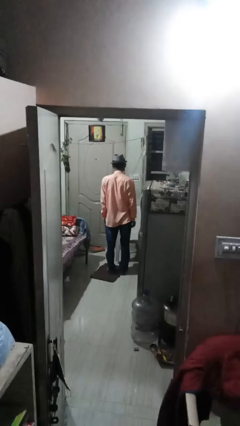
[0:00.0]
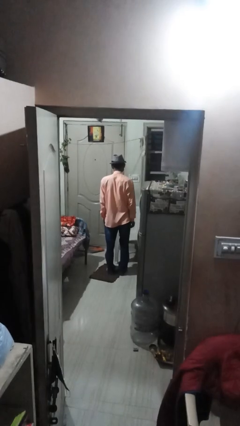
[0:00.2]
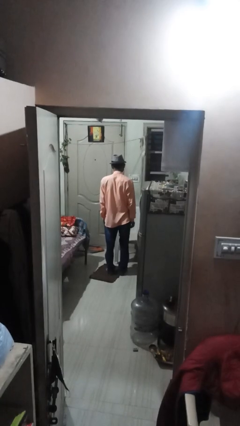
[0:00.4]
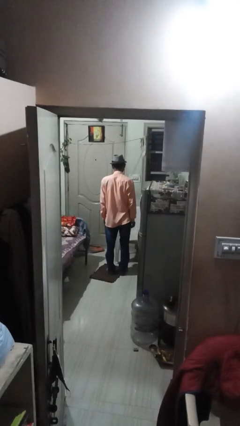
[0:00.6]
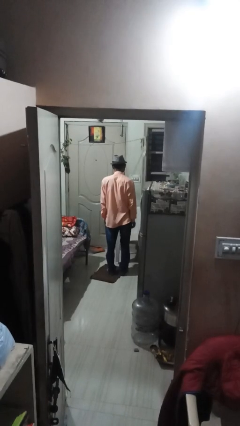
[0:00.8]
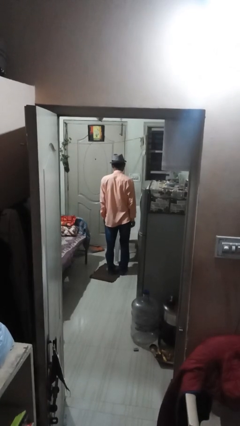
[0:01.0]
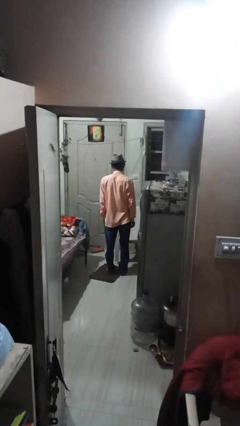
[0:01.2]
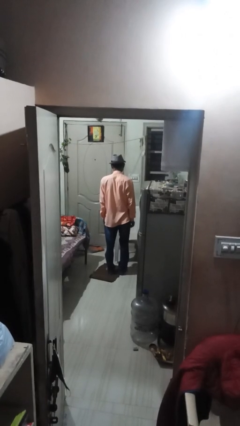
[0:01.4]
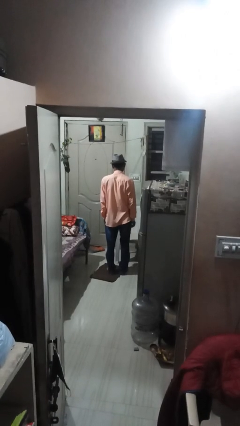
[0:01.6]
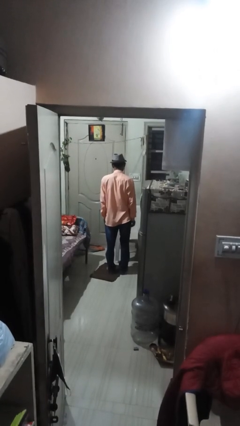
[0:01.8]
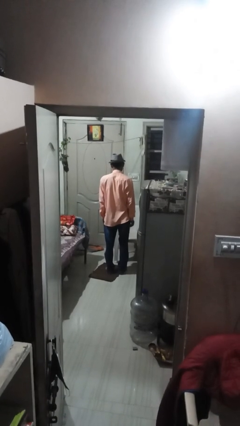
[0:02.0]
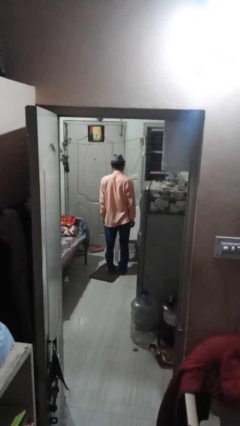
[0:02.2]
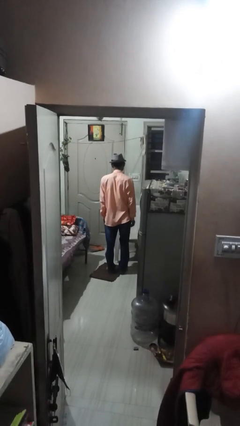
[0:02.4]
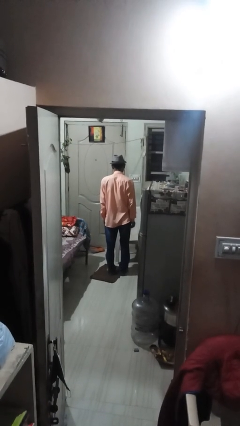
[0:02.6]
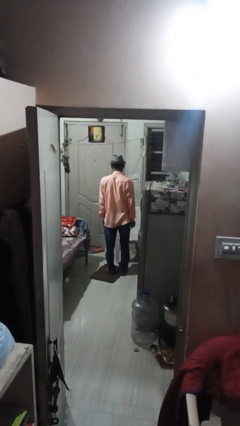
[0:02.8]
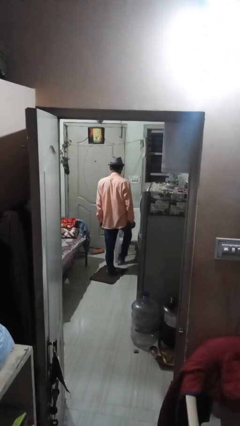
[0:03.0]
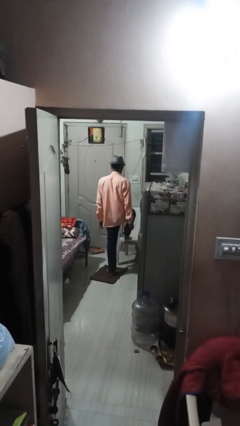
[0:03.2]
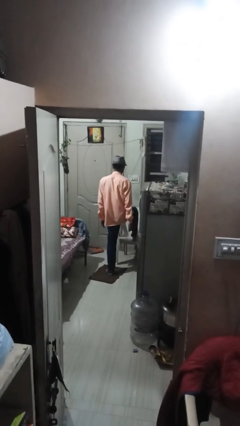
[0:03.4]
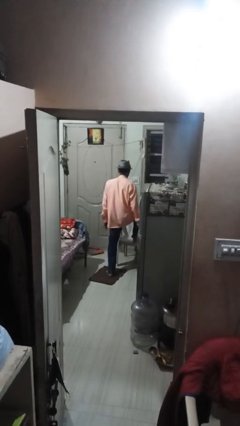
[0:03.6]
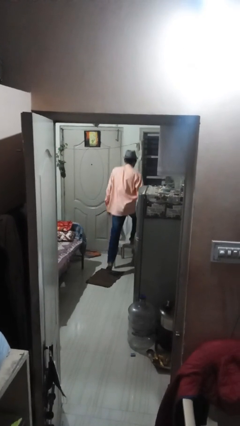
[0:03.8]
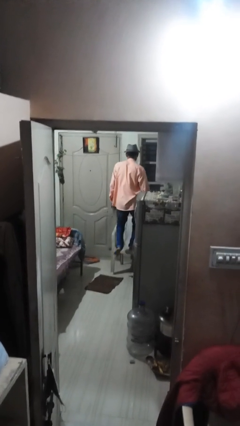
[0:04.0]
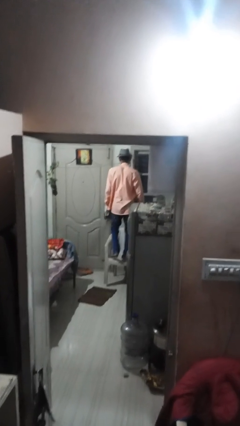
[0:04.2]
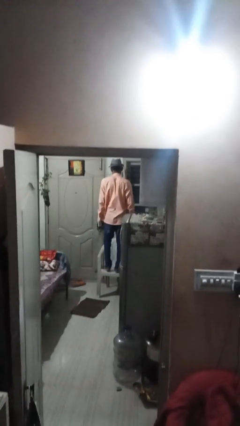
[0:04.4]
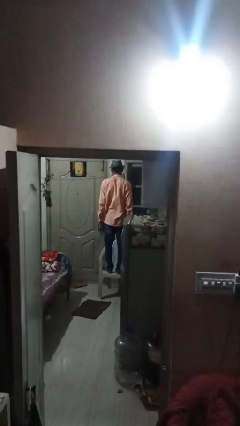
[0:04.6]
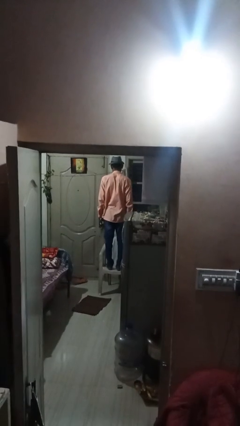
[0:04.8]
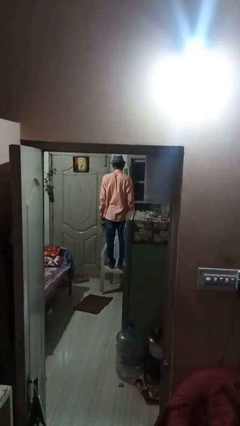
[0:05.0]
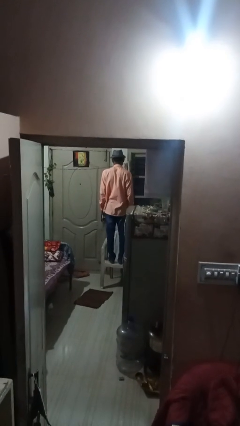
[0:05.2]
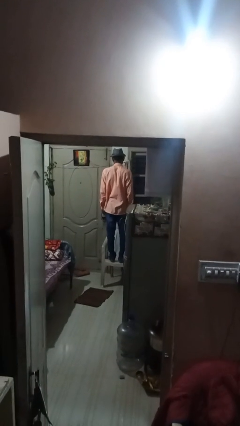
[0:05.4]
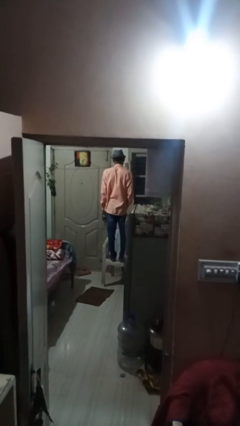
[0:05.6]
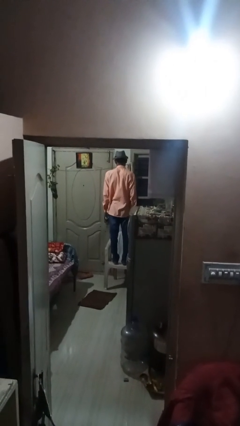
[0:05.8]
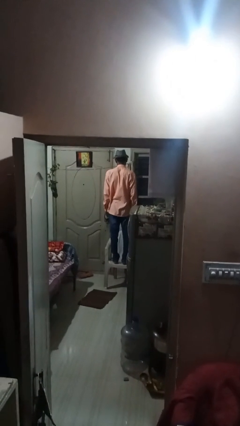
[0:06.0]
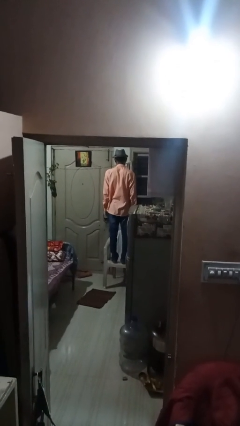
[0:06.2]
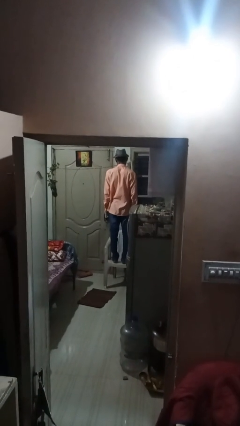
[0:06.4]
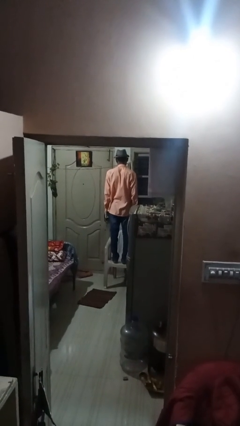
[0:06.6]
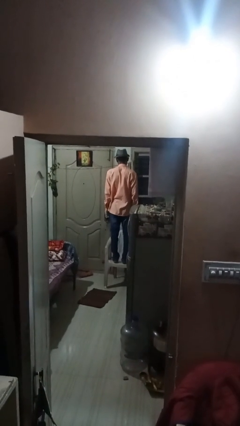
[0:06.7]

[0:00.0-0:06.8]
person climbs on chair

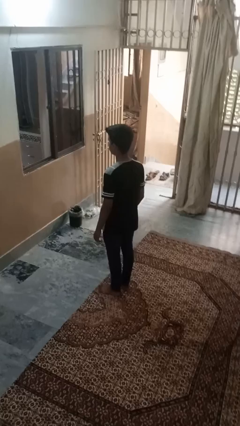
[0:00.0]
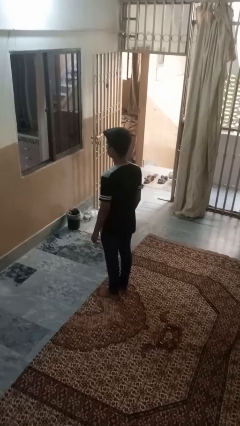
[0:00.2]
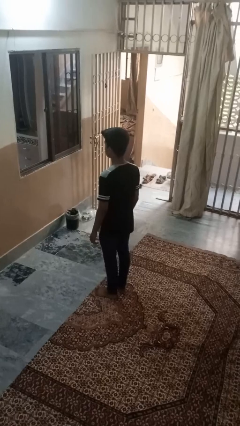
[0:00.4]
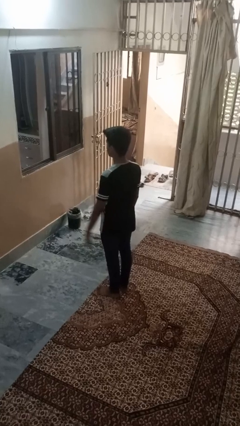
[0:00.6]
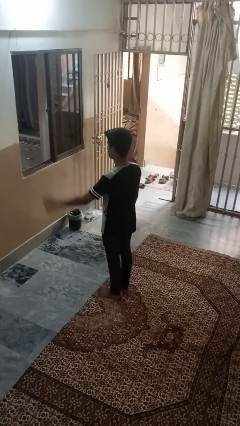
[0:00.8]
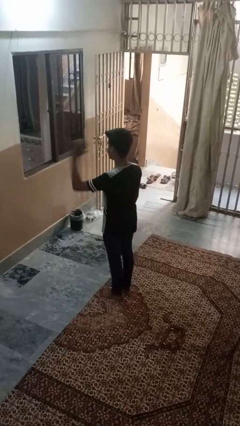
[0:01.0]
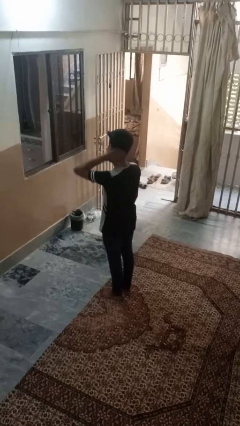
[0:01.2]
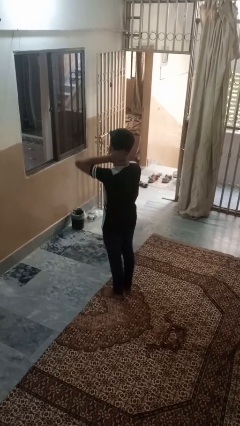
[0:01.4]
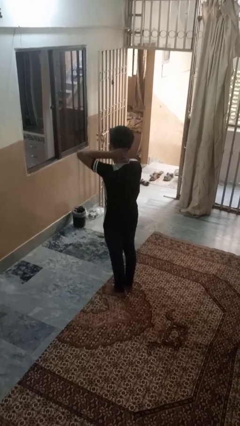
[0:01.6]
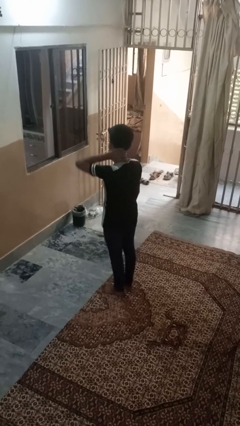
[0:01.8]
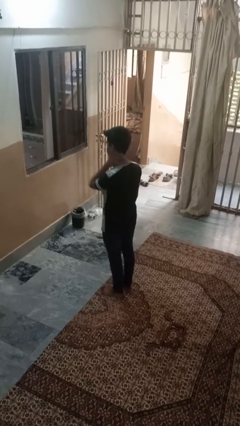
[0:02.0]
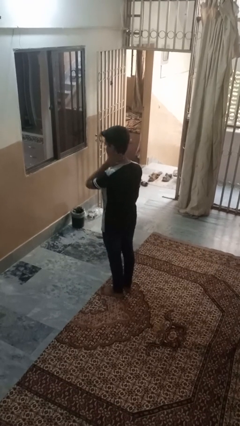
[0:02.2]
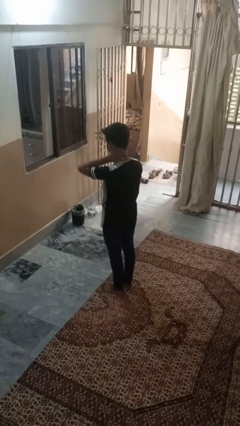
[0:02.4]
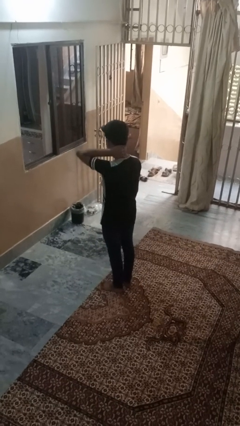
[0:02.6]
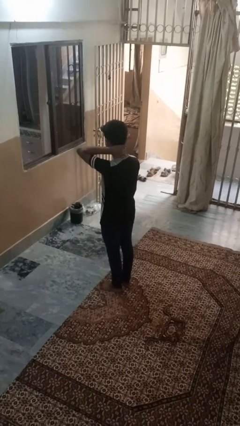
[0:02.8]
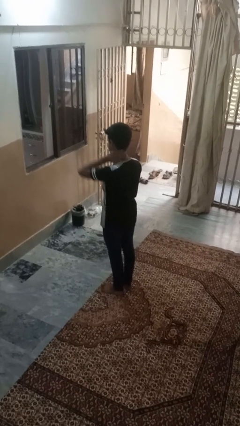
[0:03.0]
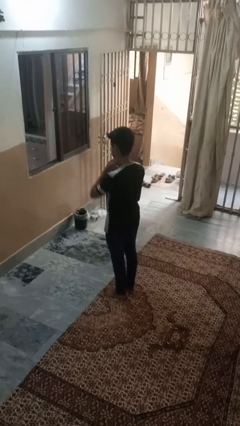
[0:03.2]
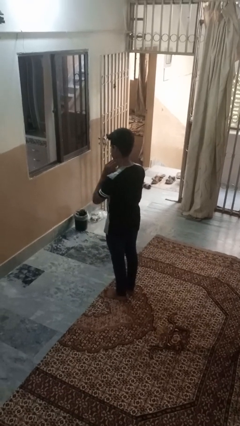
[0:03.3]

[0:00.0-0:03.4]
person rubs neck

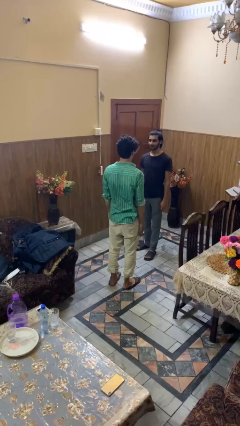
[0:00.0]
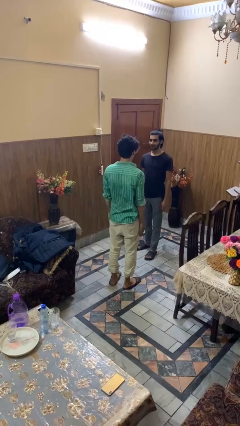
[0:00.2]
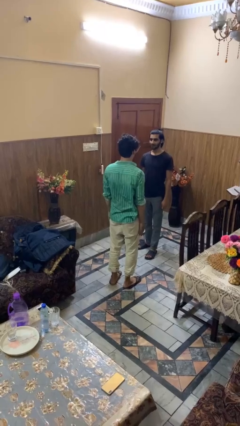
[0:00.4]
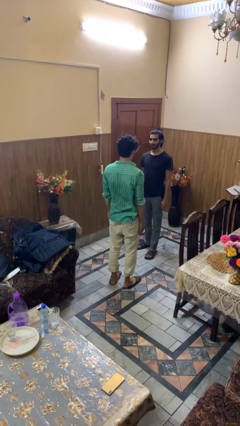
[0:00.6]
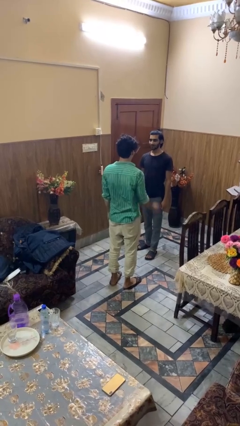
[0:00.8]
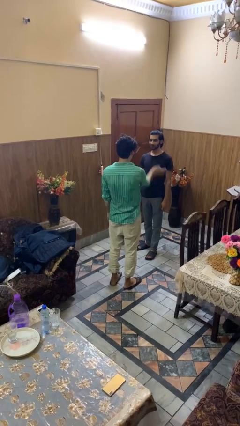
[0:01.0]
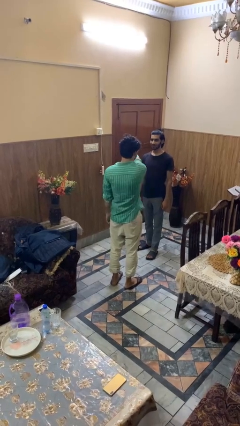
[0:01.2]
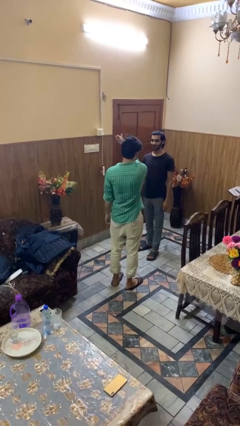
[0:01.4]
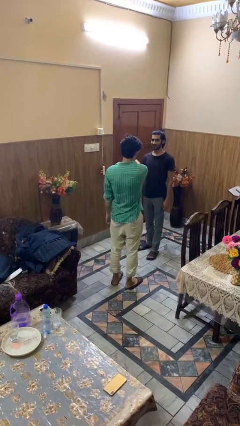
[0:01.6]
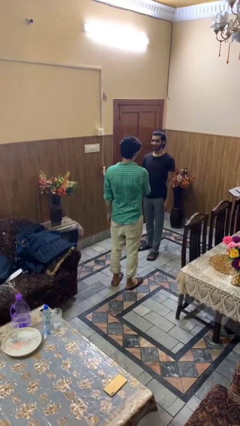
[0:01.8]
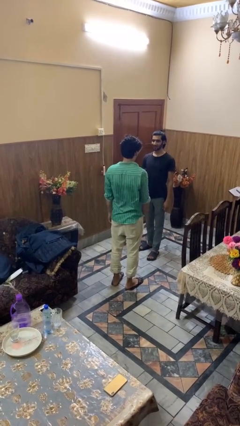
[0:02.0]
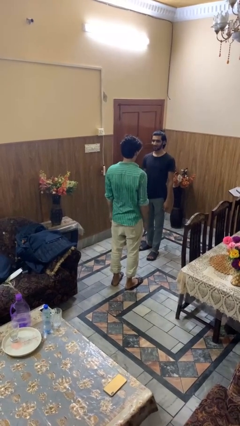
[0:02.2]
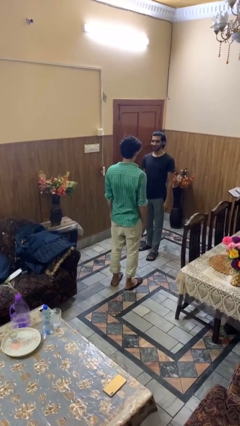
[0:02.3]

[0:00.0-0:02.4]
person shoves person

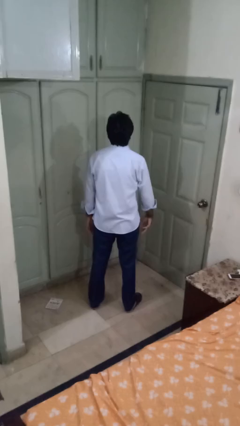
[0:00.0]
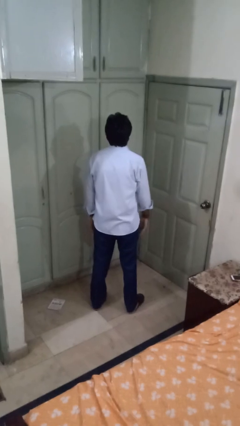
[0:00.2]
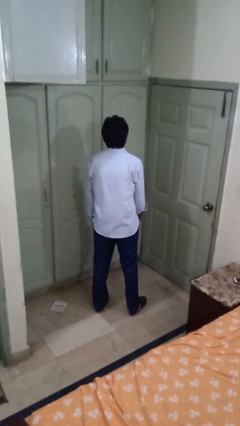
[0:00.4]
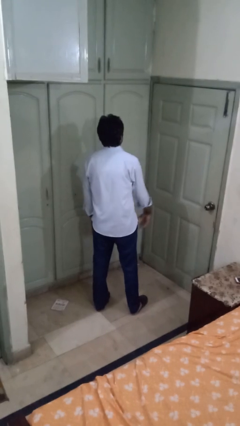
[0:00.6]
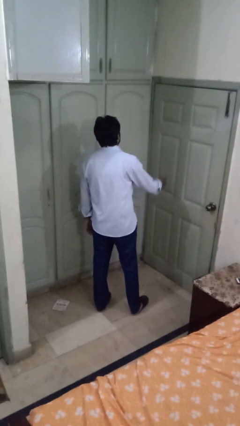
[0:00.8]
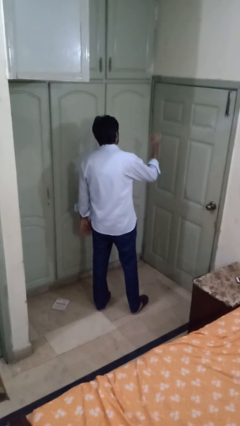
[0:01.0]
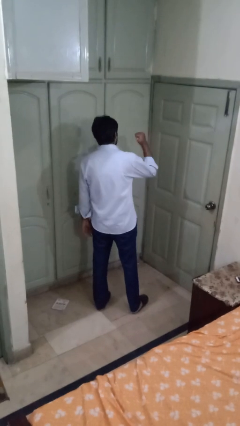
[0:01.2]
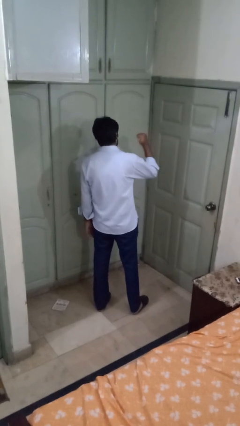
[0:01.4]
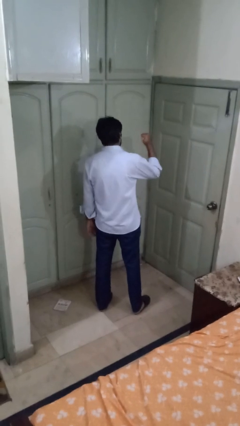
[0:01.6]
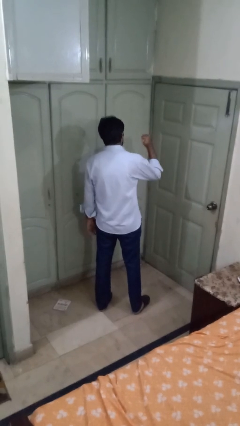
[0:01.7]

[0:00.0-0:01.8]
person gestures behind me

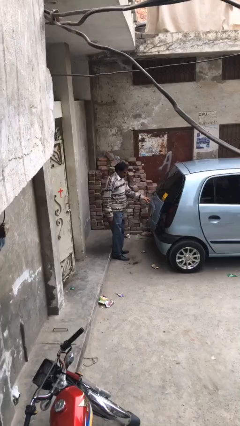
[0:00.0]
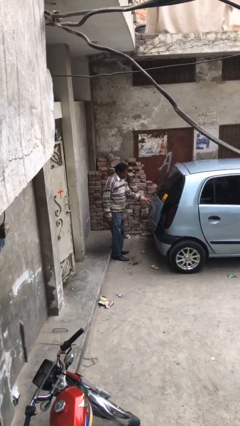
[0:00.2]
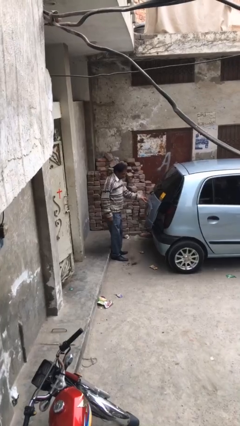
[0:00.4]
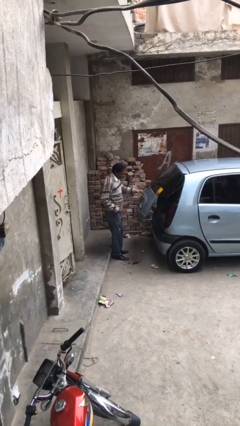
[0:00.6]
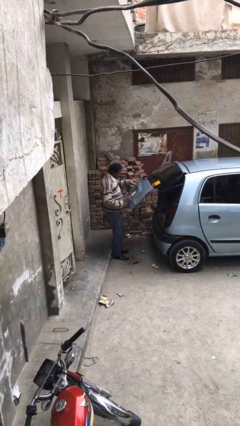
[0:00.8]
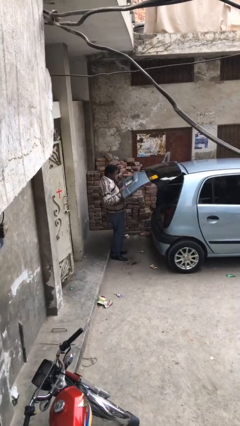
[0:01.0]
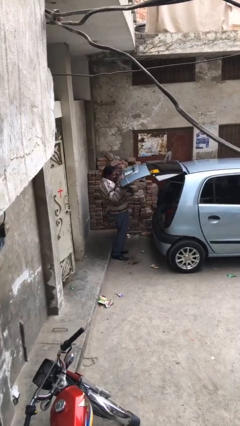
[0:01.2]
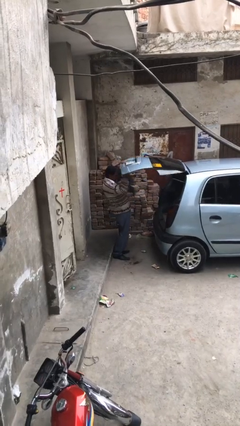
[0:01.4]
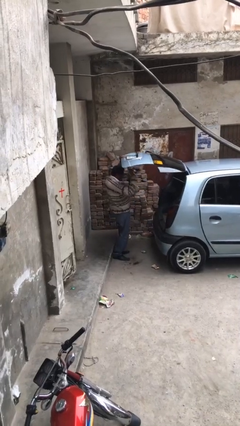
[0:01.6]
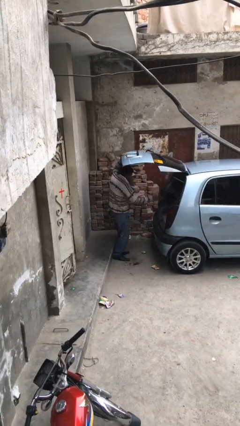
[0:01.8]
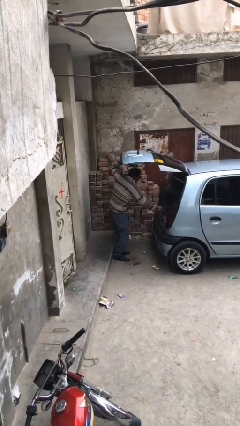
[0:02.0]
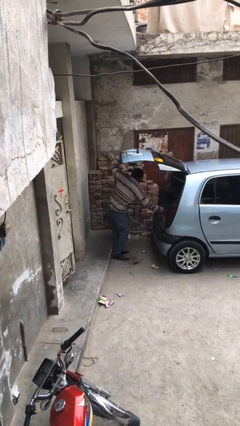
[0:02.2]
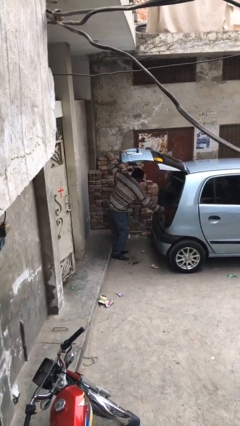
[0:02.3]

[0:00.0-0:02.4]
person unloads car

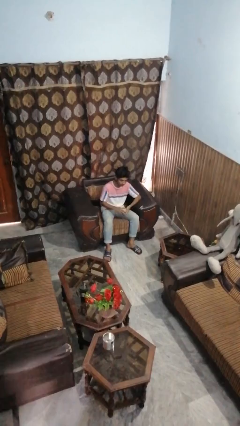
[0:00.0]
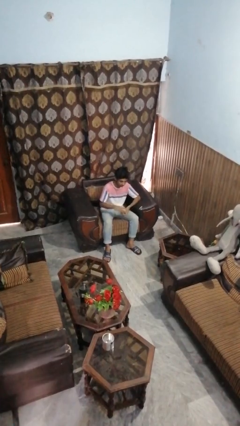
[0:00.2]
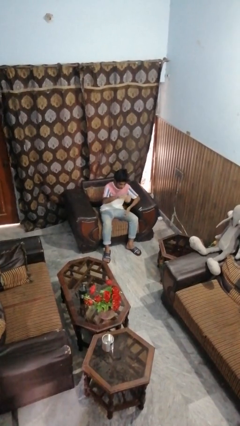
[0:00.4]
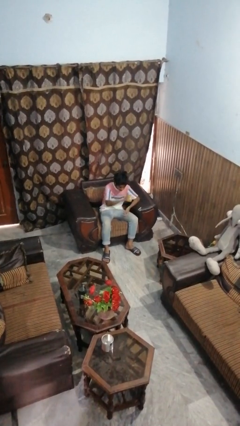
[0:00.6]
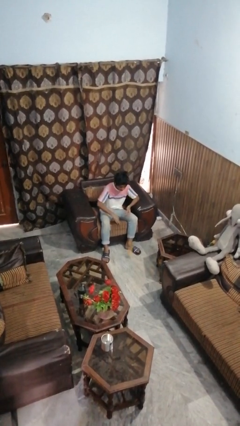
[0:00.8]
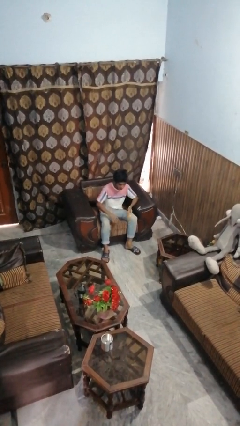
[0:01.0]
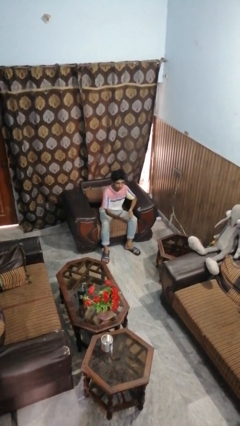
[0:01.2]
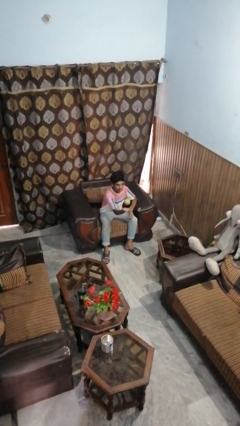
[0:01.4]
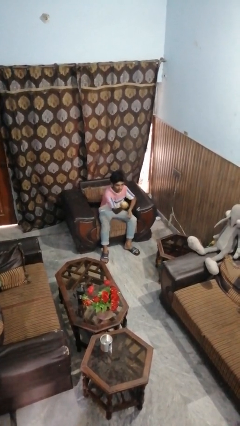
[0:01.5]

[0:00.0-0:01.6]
person bounces ball on floor
